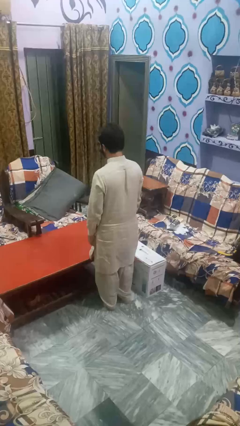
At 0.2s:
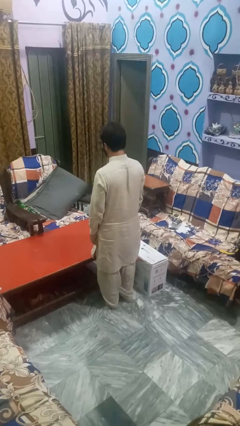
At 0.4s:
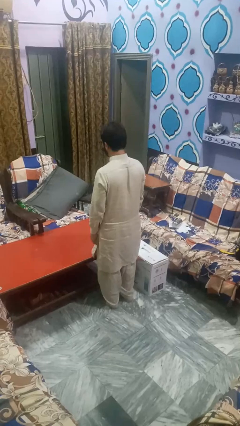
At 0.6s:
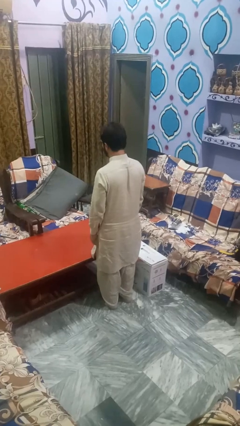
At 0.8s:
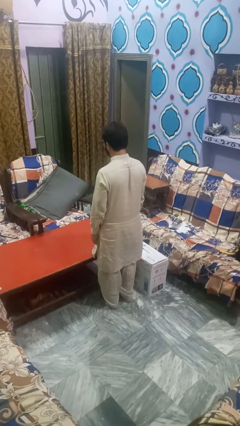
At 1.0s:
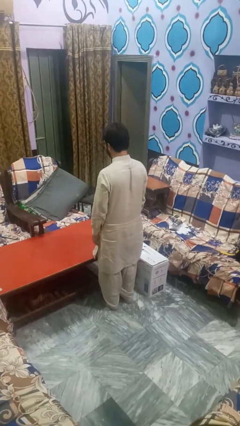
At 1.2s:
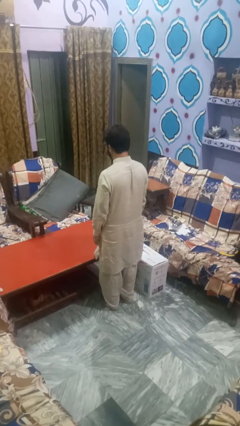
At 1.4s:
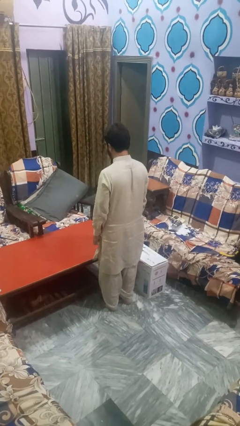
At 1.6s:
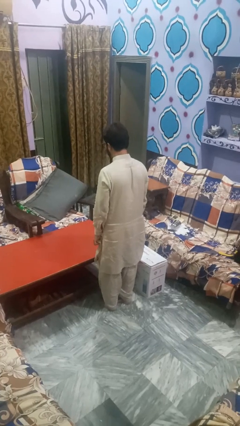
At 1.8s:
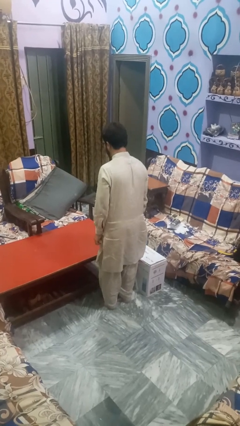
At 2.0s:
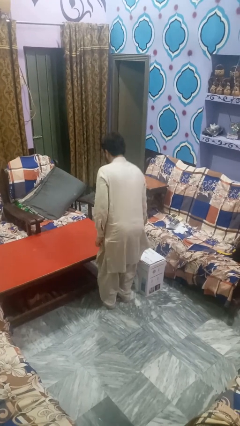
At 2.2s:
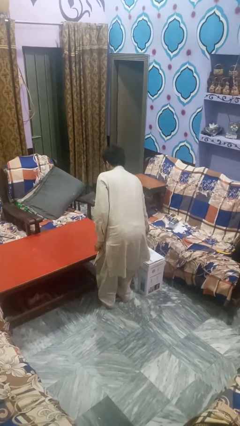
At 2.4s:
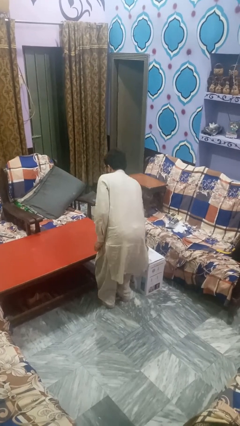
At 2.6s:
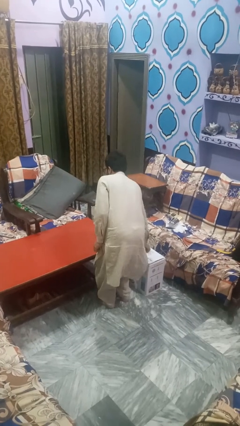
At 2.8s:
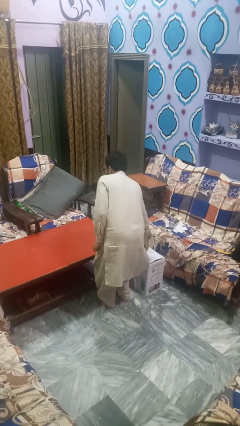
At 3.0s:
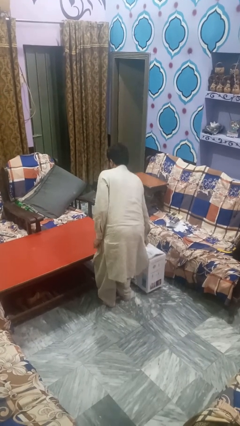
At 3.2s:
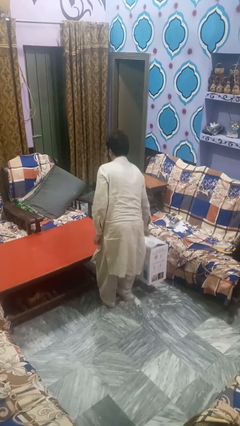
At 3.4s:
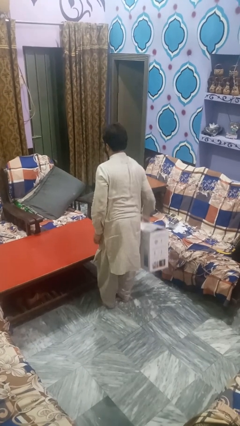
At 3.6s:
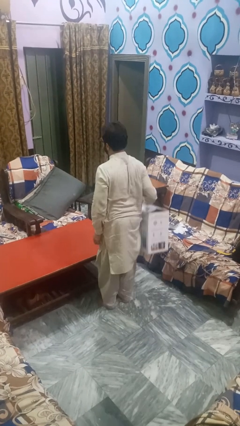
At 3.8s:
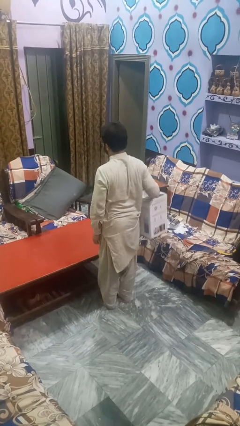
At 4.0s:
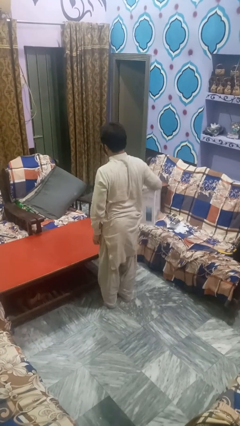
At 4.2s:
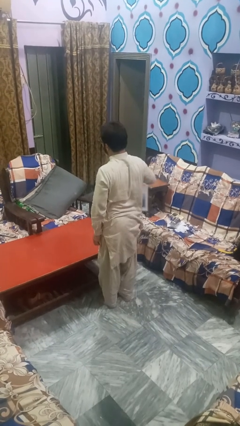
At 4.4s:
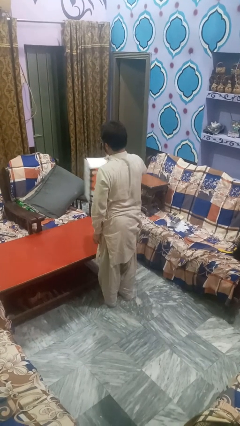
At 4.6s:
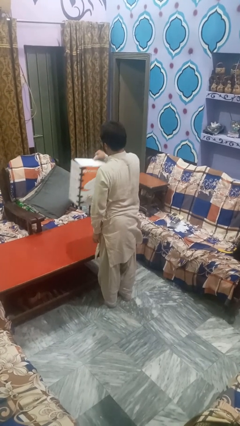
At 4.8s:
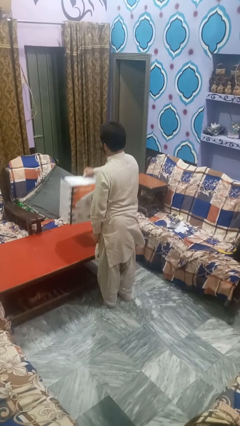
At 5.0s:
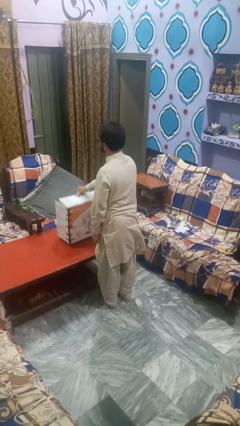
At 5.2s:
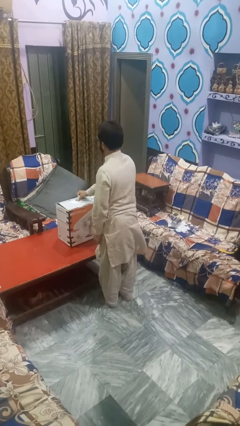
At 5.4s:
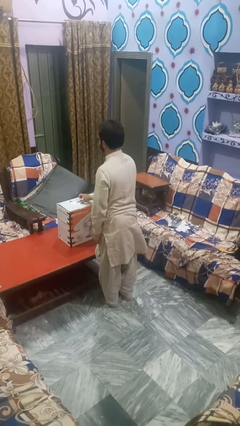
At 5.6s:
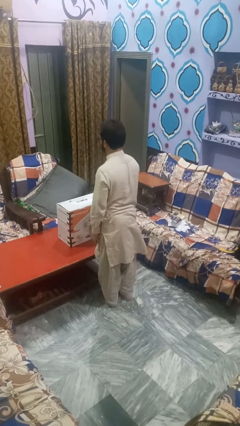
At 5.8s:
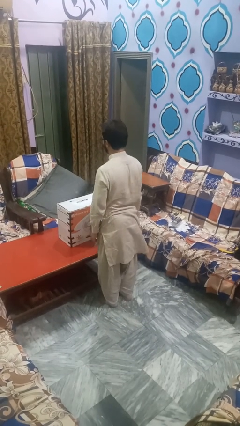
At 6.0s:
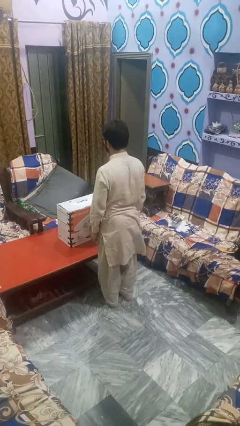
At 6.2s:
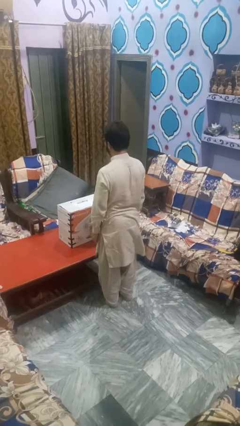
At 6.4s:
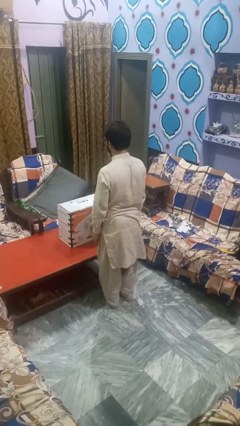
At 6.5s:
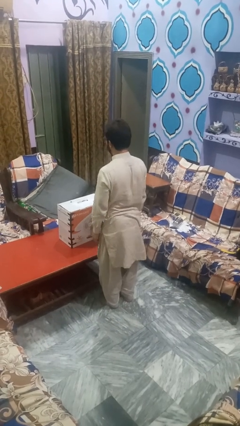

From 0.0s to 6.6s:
person unloads box onto table

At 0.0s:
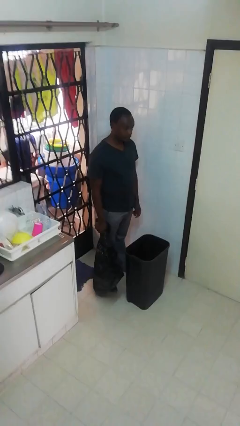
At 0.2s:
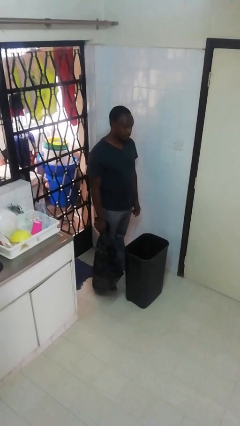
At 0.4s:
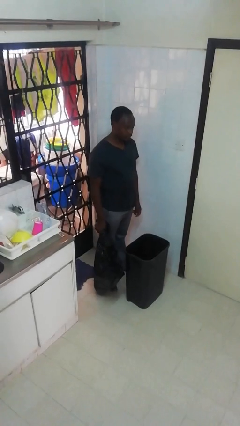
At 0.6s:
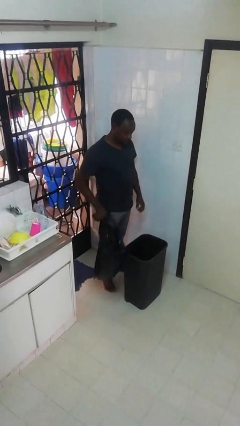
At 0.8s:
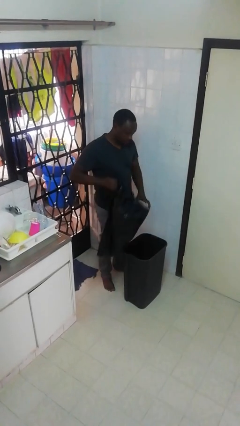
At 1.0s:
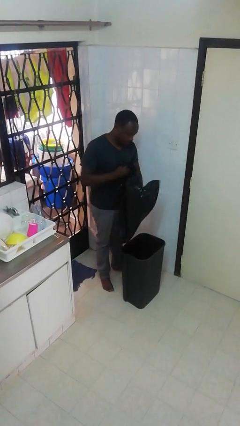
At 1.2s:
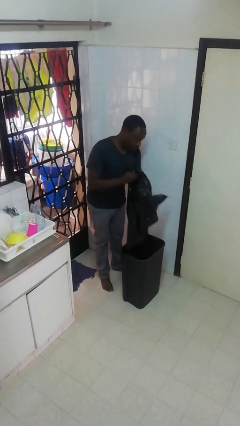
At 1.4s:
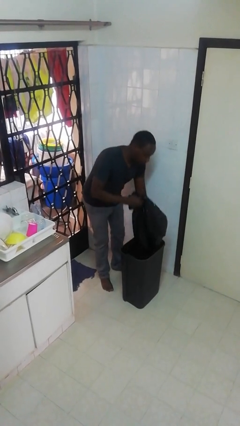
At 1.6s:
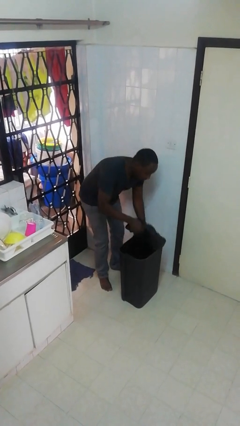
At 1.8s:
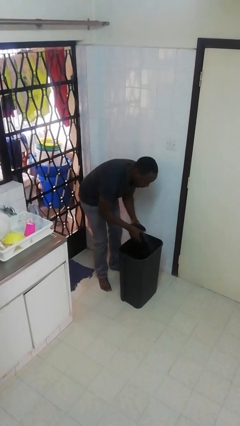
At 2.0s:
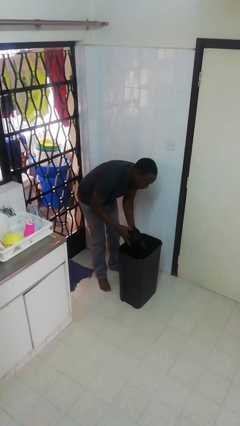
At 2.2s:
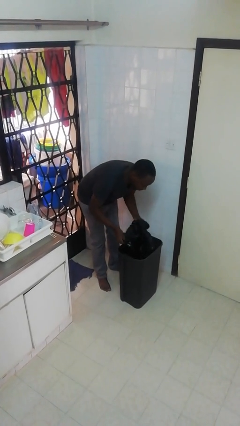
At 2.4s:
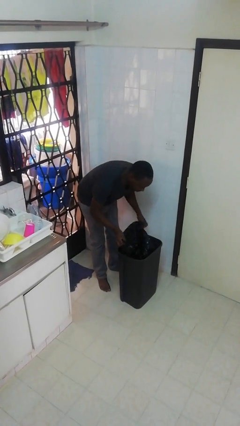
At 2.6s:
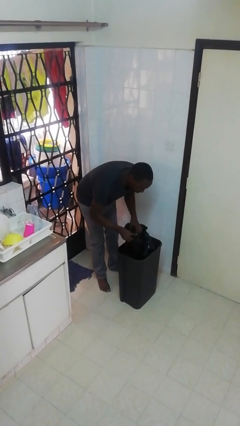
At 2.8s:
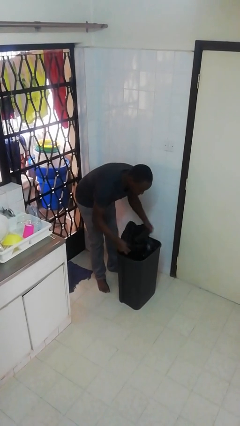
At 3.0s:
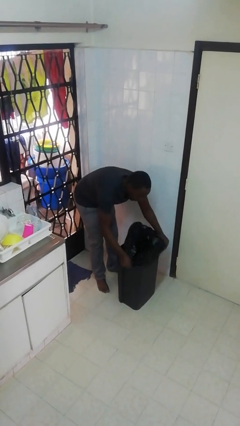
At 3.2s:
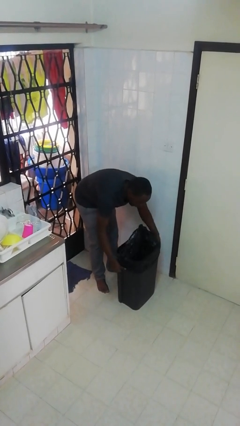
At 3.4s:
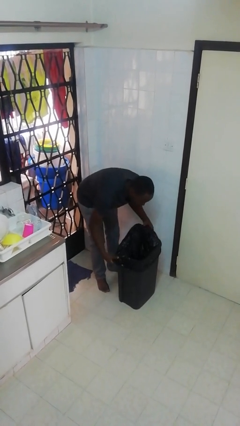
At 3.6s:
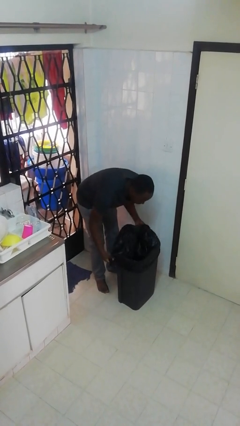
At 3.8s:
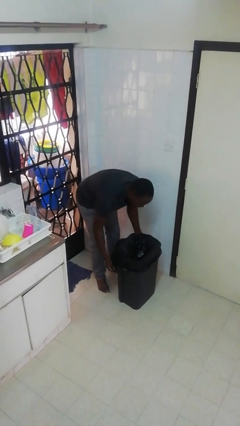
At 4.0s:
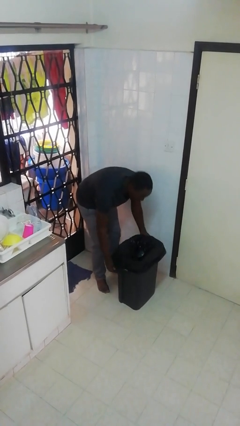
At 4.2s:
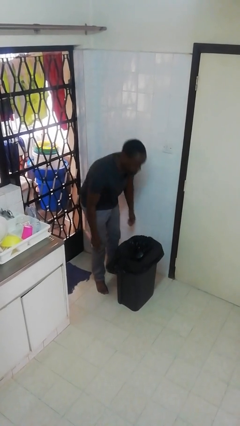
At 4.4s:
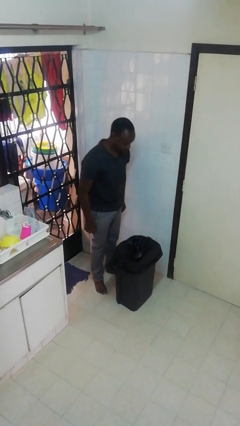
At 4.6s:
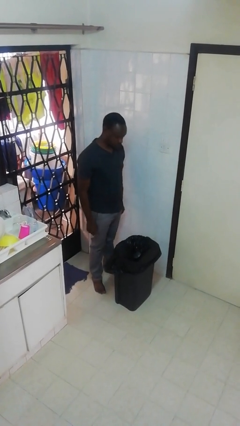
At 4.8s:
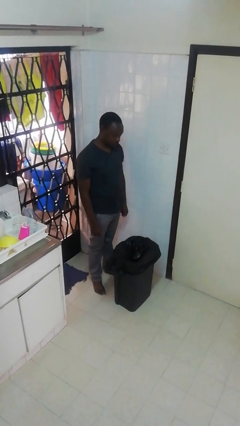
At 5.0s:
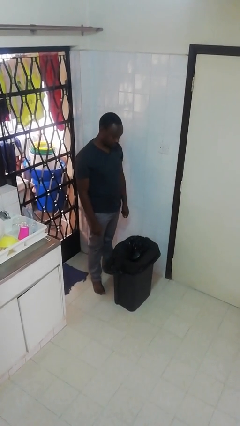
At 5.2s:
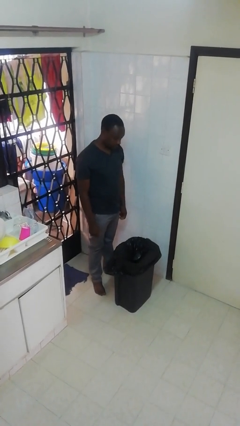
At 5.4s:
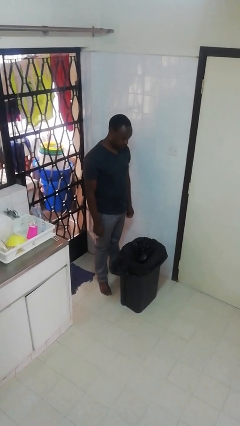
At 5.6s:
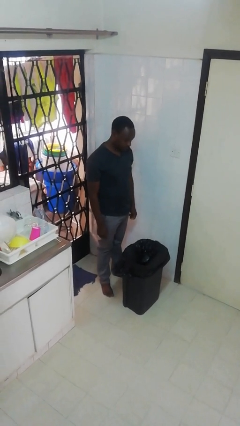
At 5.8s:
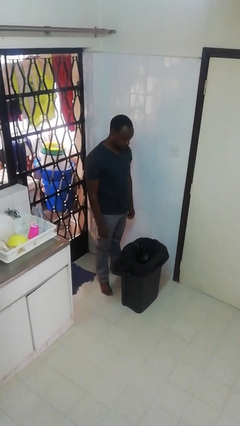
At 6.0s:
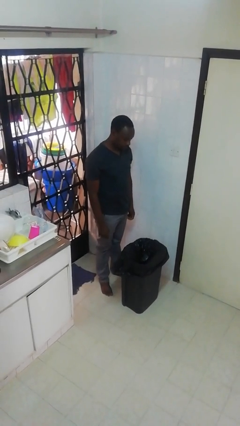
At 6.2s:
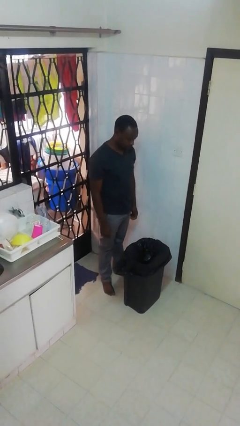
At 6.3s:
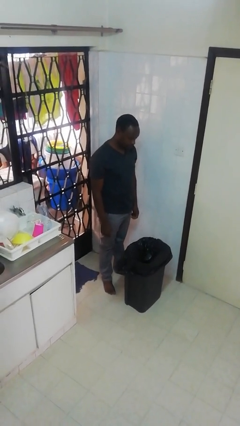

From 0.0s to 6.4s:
person inserts trashbag into trashcan

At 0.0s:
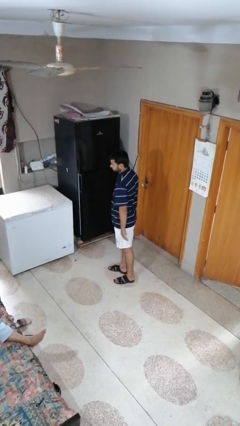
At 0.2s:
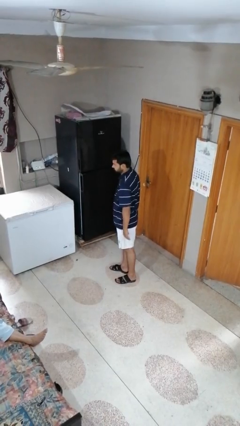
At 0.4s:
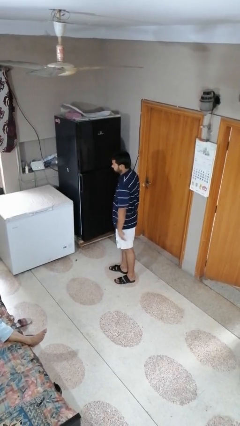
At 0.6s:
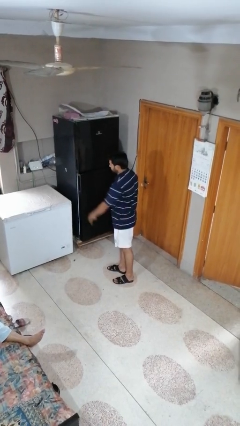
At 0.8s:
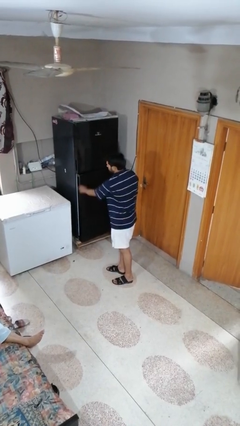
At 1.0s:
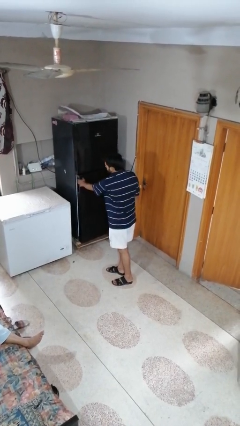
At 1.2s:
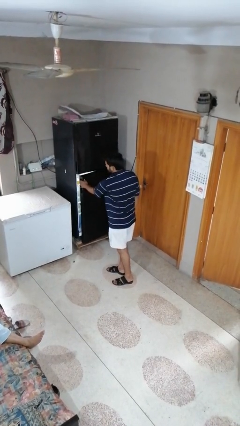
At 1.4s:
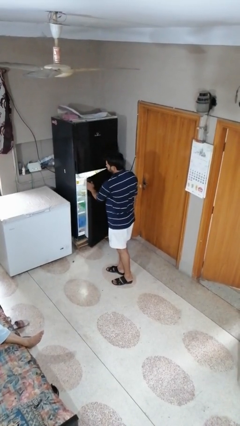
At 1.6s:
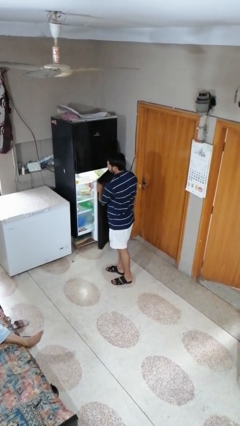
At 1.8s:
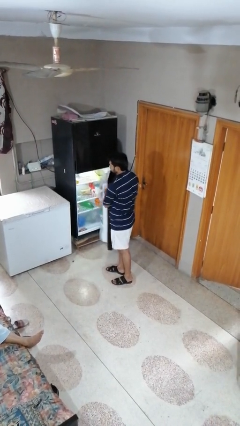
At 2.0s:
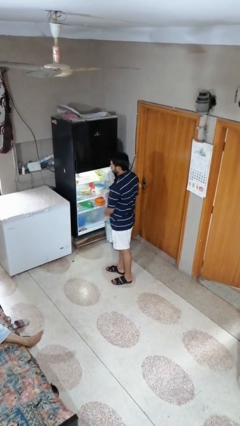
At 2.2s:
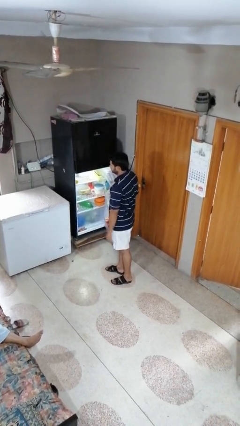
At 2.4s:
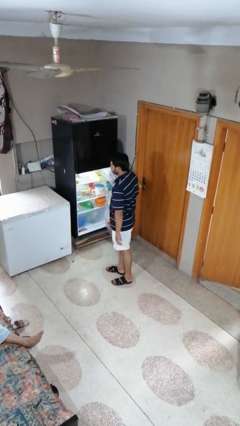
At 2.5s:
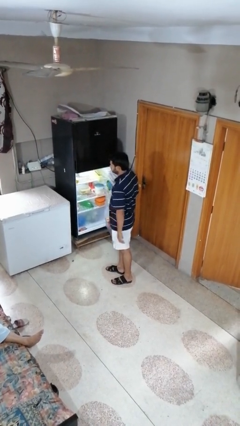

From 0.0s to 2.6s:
person opens refrigerator

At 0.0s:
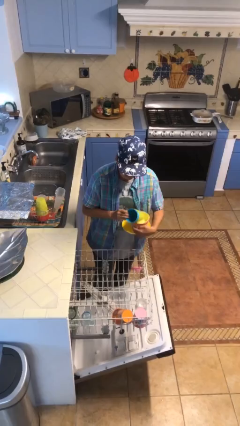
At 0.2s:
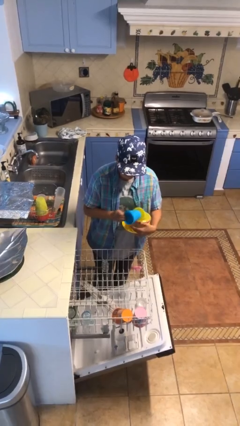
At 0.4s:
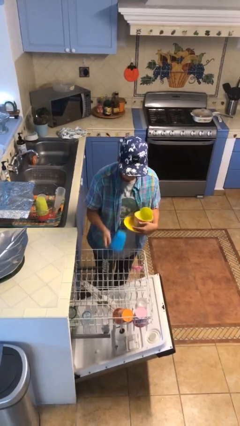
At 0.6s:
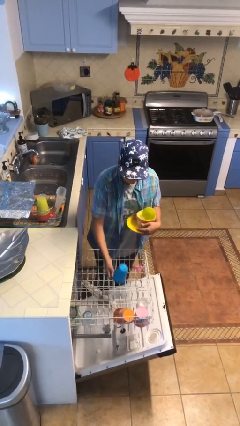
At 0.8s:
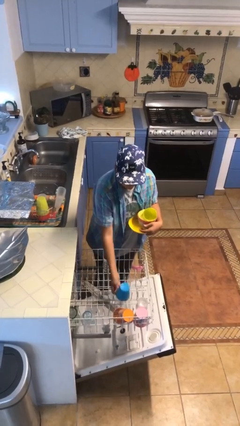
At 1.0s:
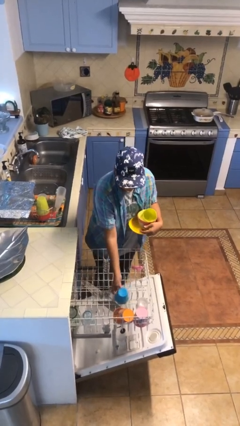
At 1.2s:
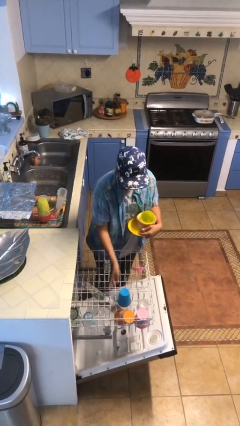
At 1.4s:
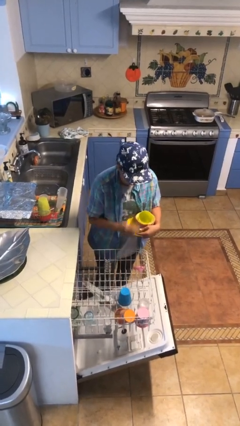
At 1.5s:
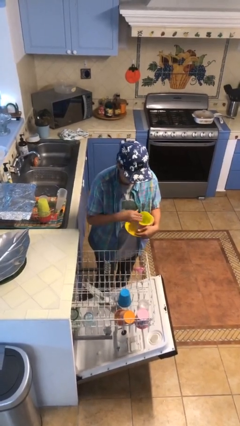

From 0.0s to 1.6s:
person loads dishwasher

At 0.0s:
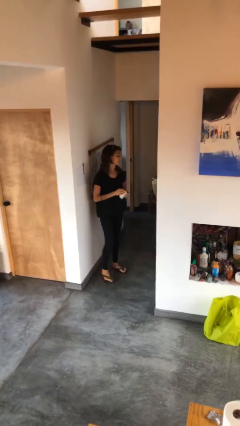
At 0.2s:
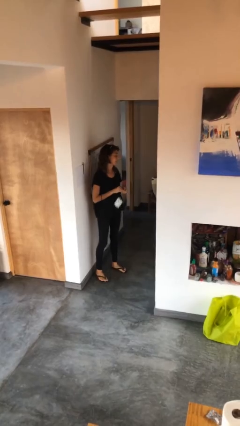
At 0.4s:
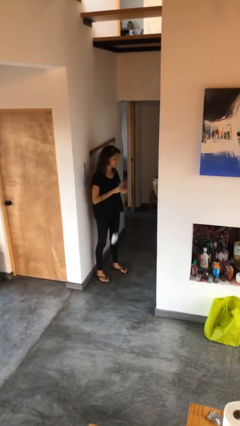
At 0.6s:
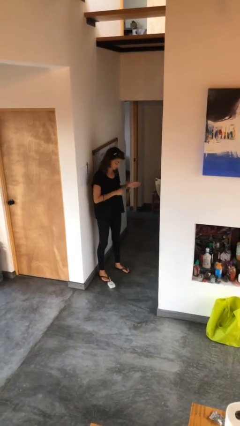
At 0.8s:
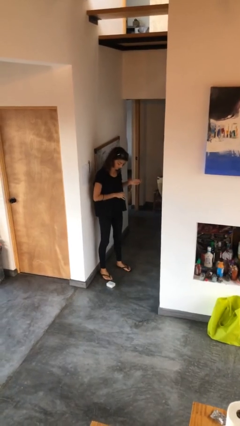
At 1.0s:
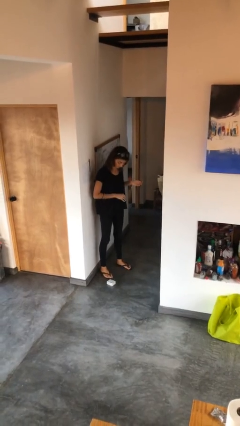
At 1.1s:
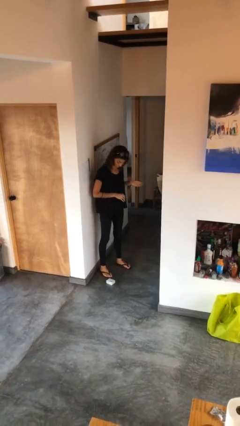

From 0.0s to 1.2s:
person drops object
